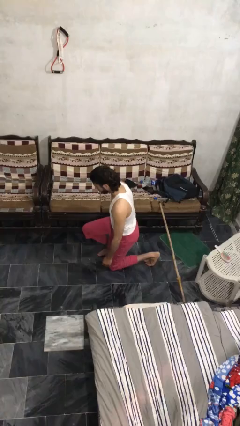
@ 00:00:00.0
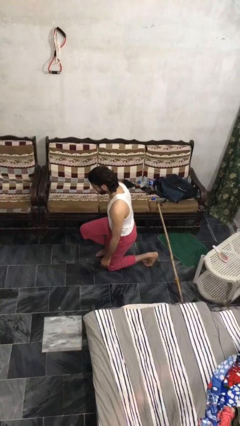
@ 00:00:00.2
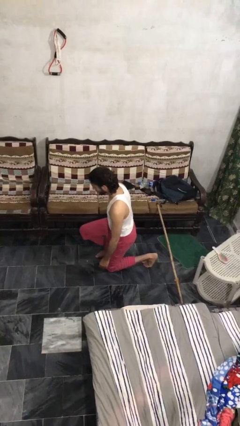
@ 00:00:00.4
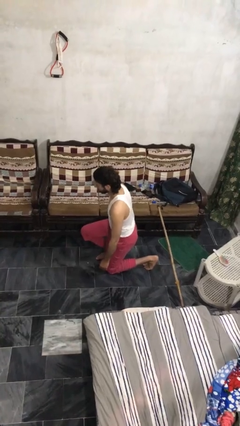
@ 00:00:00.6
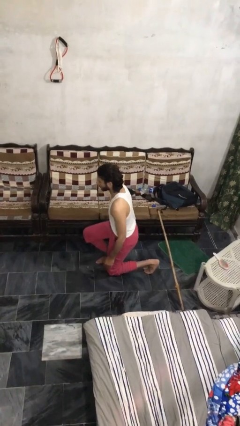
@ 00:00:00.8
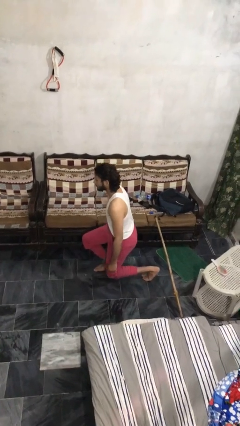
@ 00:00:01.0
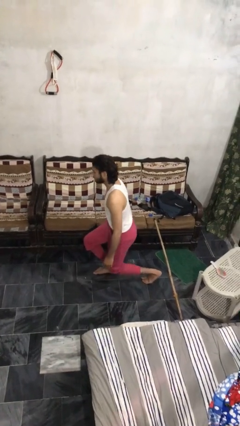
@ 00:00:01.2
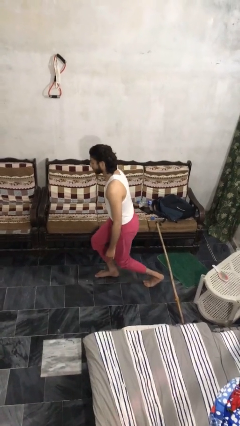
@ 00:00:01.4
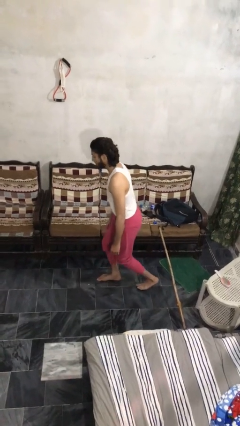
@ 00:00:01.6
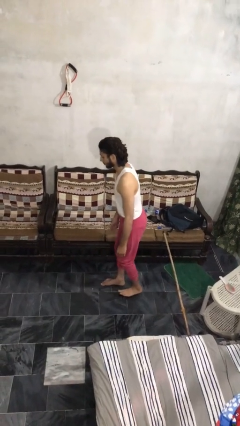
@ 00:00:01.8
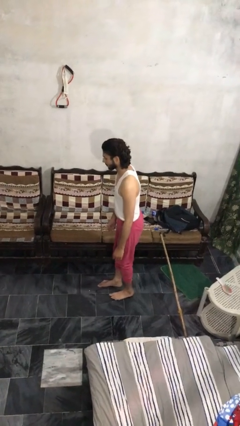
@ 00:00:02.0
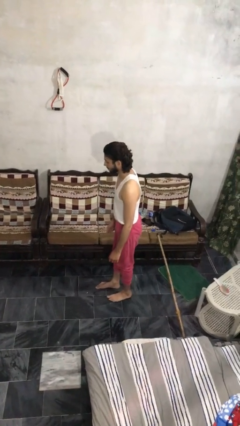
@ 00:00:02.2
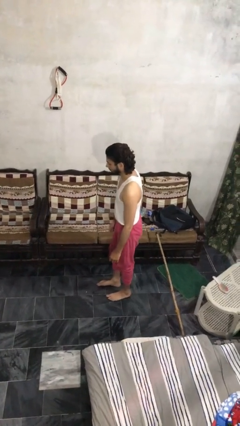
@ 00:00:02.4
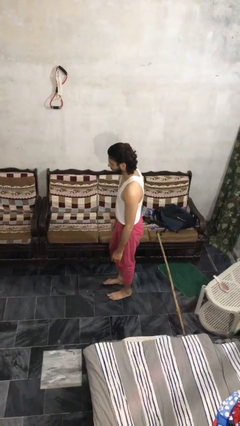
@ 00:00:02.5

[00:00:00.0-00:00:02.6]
person stands up from floor

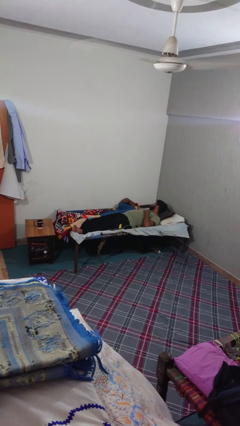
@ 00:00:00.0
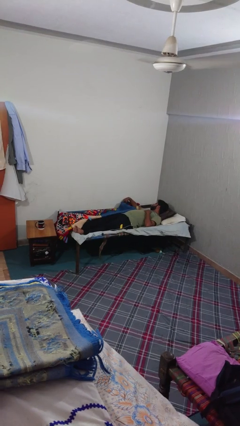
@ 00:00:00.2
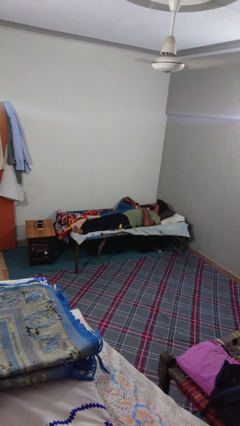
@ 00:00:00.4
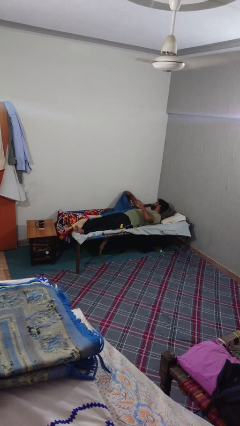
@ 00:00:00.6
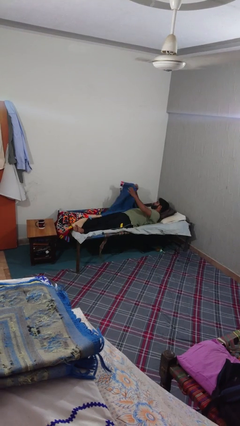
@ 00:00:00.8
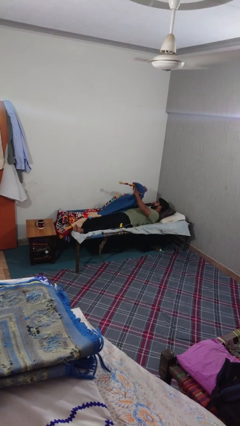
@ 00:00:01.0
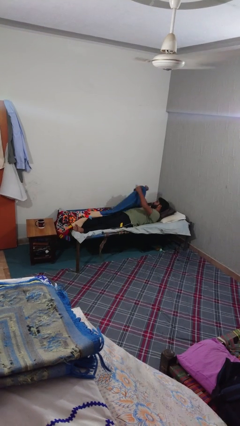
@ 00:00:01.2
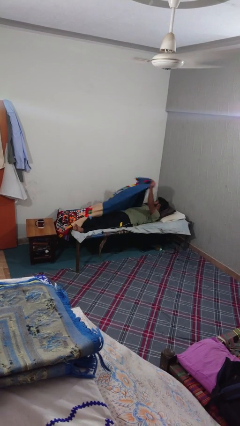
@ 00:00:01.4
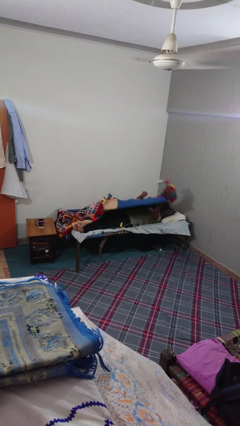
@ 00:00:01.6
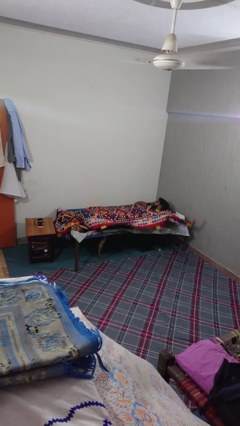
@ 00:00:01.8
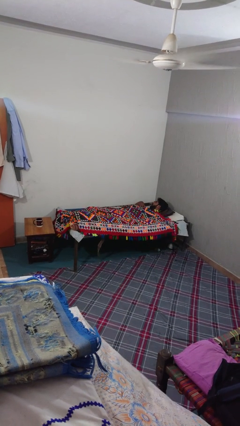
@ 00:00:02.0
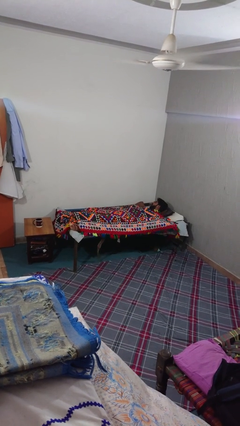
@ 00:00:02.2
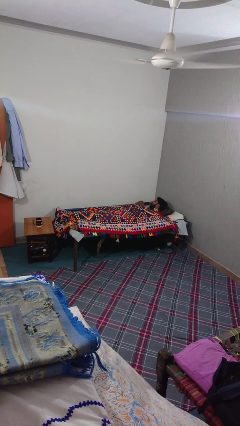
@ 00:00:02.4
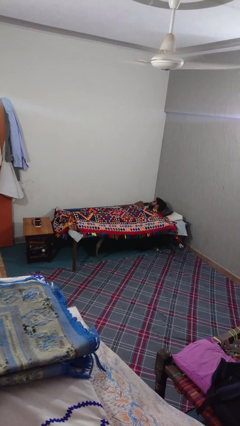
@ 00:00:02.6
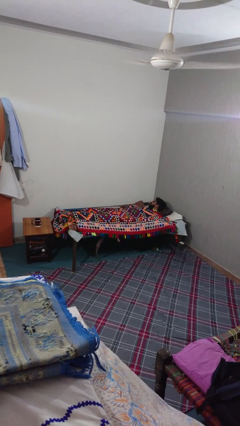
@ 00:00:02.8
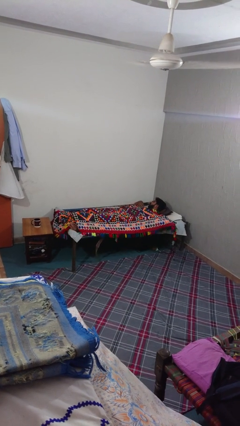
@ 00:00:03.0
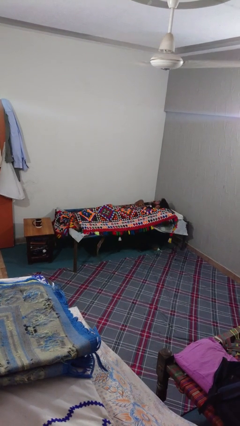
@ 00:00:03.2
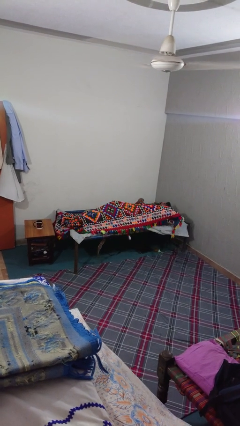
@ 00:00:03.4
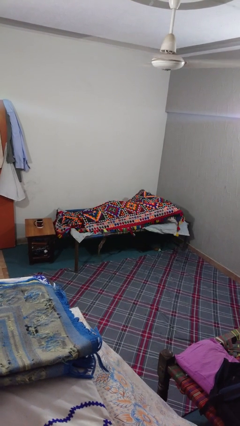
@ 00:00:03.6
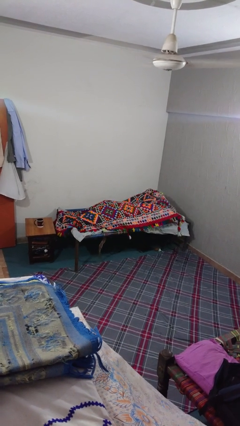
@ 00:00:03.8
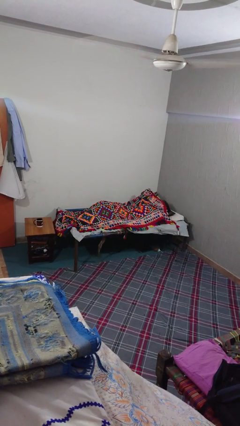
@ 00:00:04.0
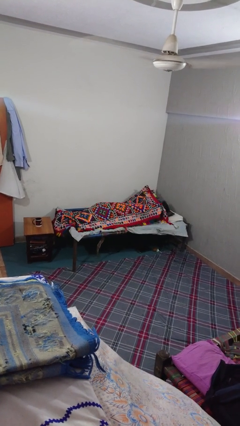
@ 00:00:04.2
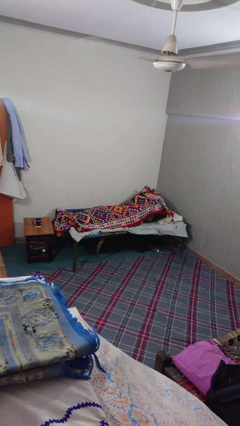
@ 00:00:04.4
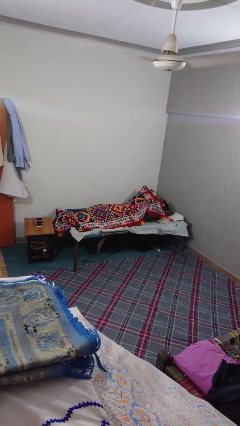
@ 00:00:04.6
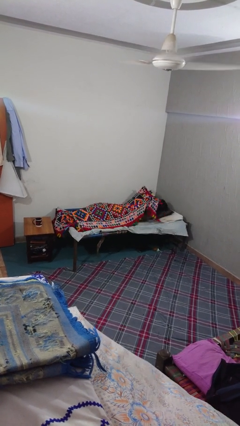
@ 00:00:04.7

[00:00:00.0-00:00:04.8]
person covers with blanket

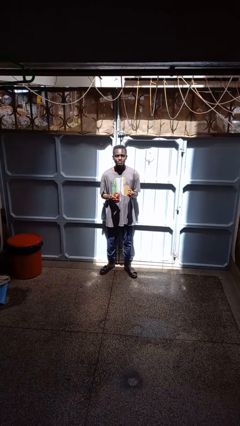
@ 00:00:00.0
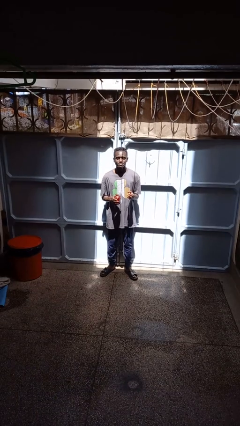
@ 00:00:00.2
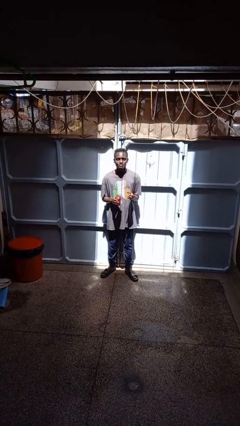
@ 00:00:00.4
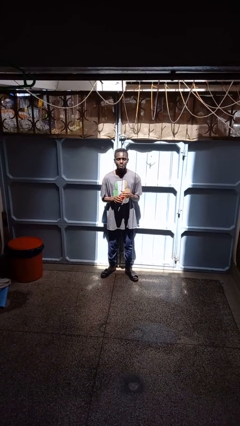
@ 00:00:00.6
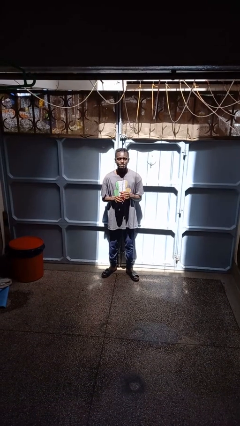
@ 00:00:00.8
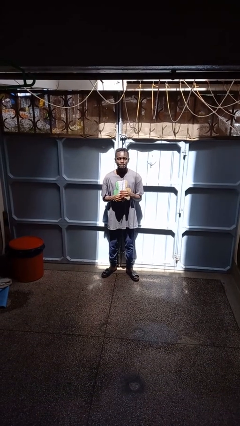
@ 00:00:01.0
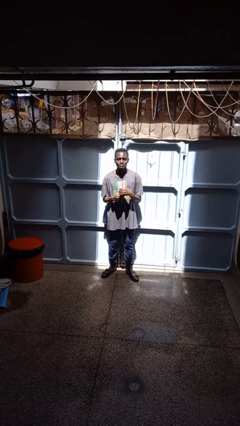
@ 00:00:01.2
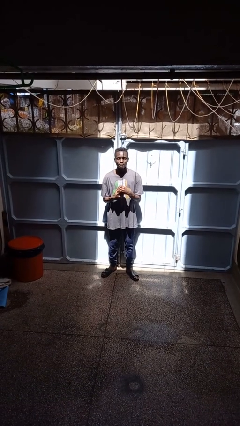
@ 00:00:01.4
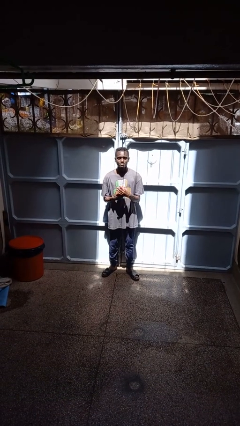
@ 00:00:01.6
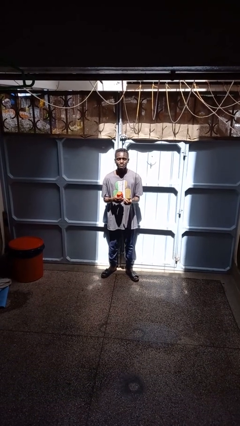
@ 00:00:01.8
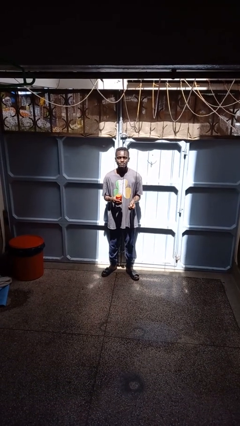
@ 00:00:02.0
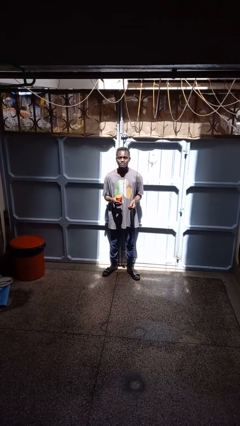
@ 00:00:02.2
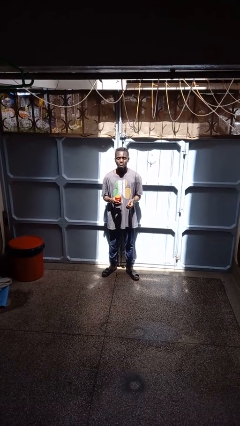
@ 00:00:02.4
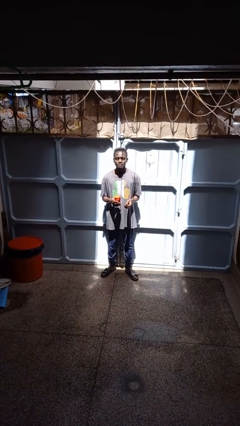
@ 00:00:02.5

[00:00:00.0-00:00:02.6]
person closes jar

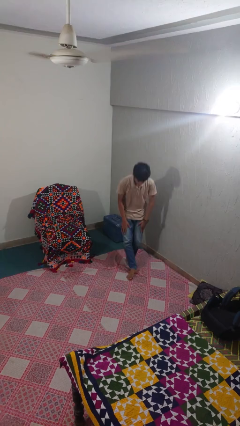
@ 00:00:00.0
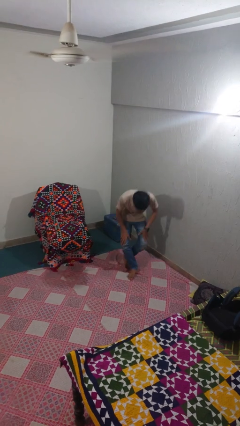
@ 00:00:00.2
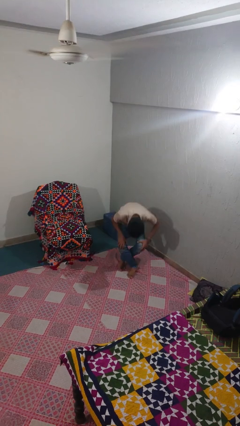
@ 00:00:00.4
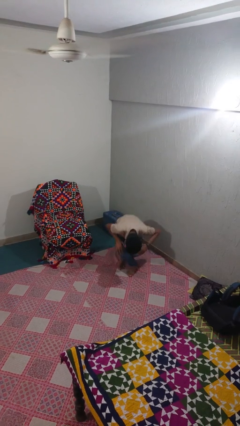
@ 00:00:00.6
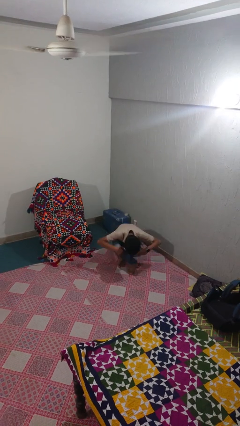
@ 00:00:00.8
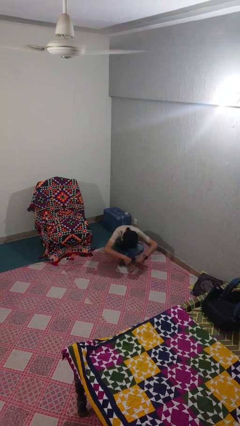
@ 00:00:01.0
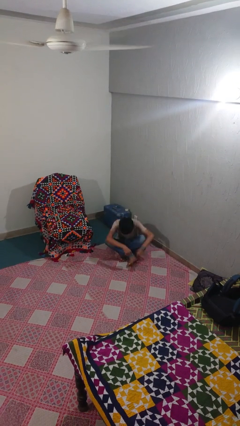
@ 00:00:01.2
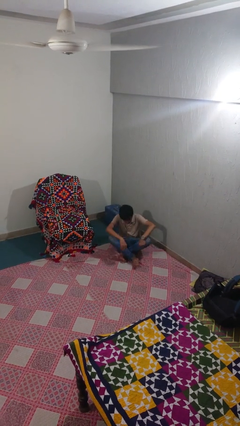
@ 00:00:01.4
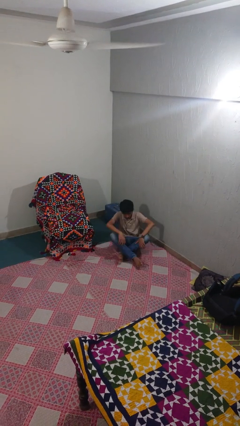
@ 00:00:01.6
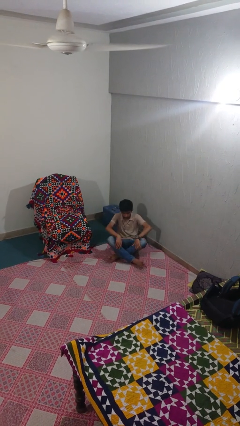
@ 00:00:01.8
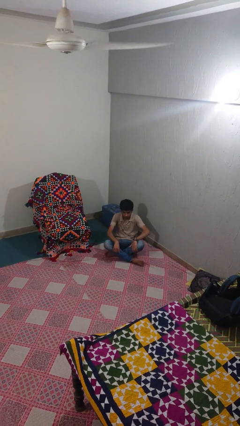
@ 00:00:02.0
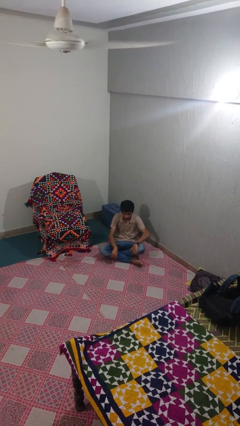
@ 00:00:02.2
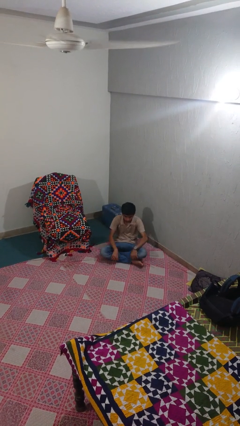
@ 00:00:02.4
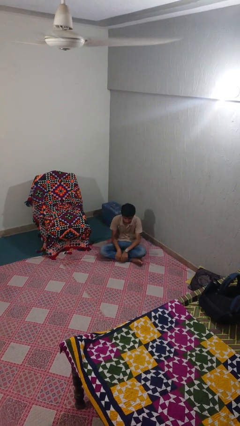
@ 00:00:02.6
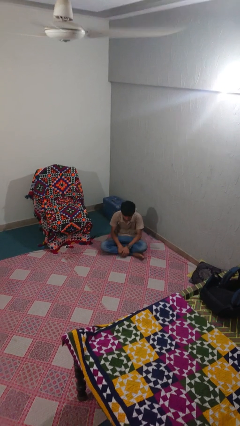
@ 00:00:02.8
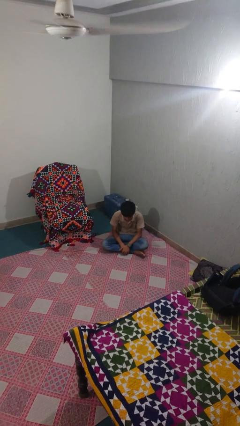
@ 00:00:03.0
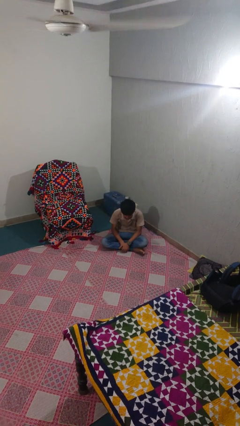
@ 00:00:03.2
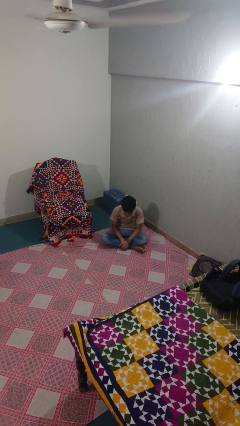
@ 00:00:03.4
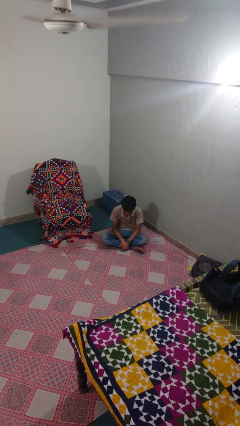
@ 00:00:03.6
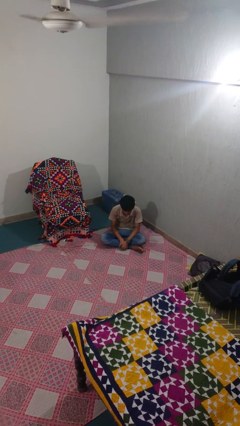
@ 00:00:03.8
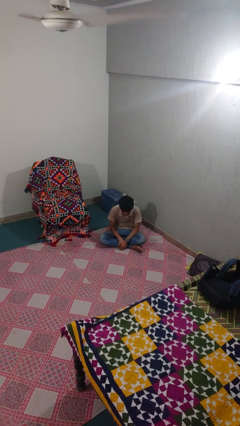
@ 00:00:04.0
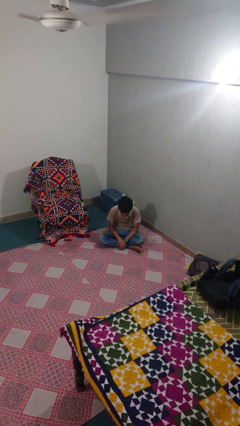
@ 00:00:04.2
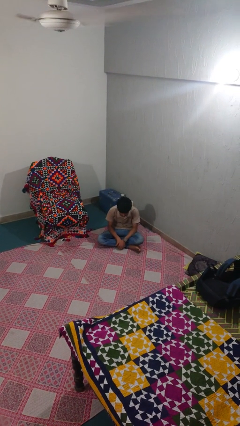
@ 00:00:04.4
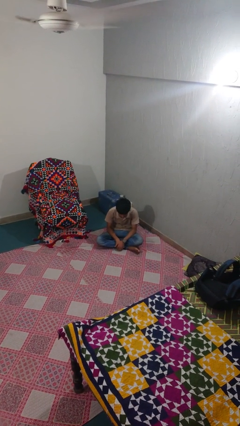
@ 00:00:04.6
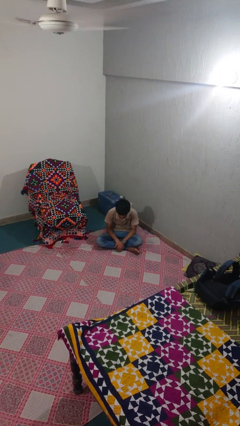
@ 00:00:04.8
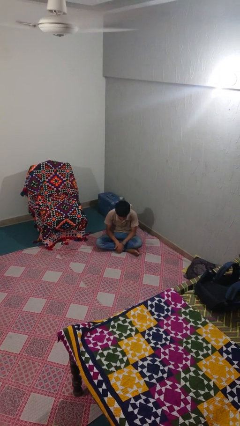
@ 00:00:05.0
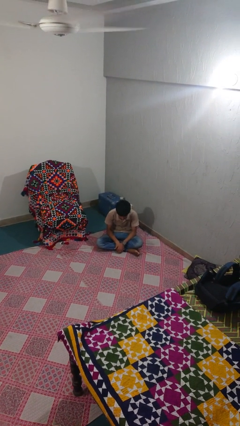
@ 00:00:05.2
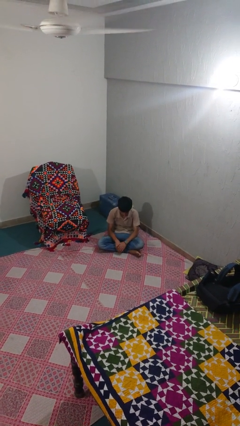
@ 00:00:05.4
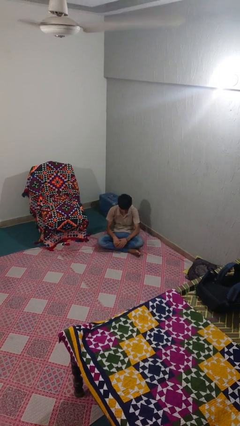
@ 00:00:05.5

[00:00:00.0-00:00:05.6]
person sits crisscross

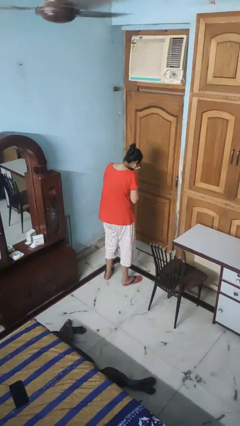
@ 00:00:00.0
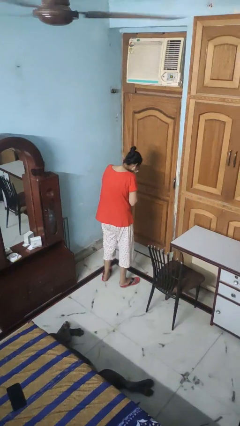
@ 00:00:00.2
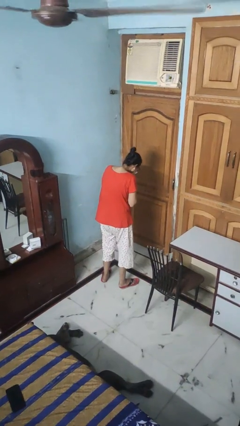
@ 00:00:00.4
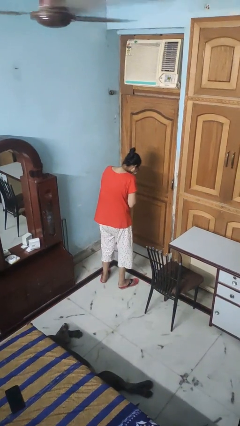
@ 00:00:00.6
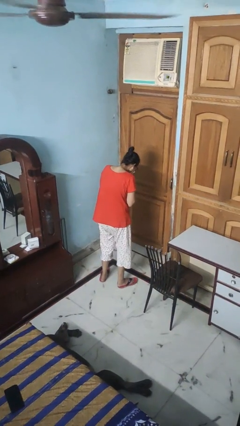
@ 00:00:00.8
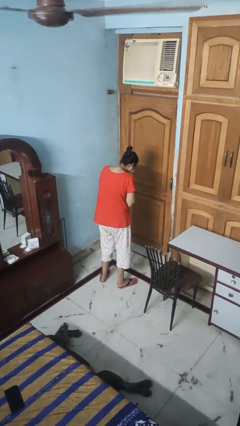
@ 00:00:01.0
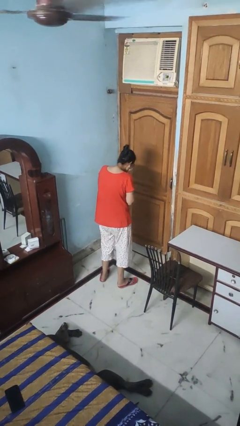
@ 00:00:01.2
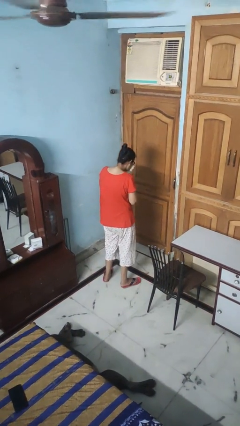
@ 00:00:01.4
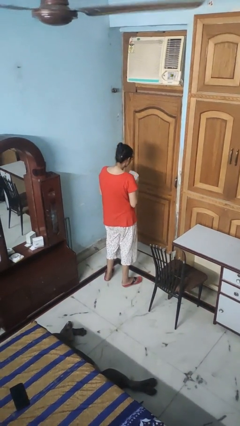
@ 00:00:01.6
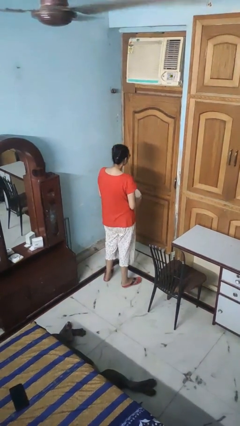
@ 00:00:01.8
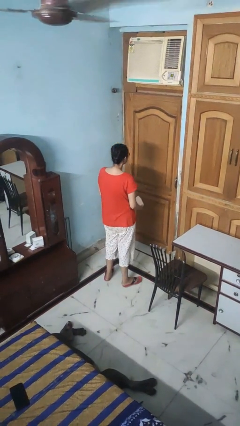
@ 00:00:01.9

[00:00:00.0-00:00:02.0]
person blows nose
